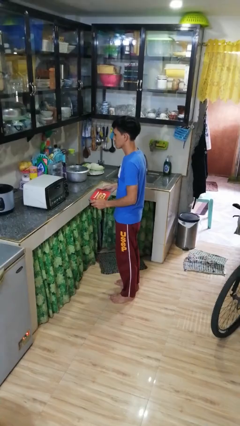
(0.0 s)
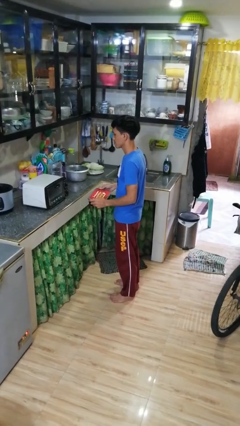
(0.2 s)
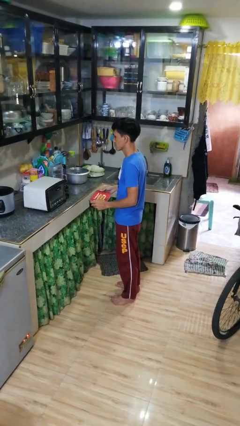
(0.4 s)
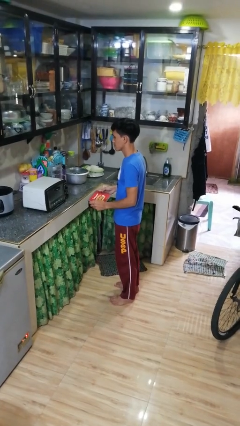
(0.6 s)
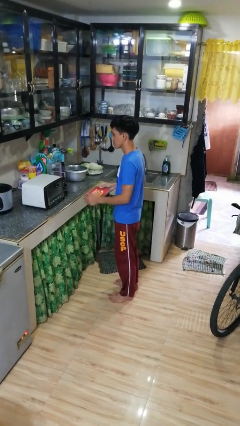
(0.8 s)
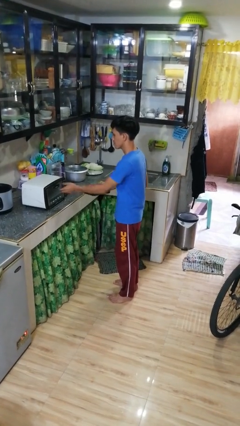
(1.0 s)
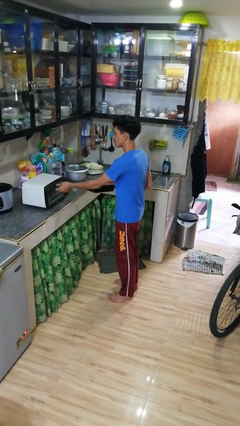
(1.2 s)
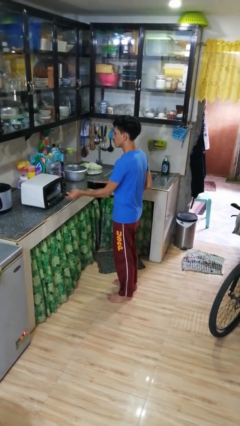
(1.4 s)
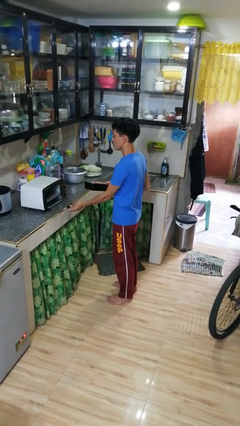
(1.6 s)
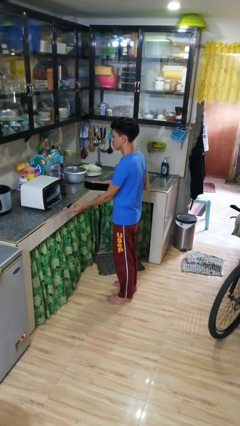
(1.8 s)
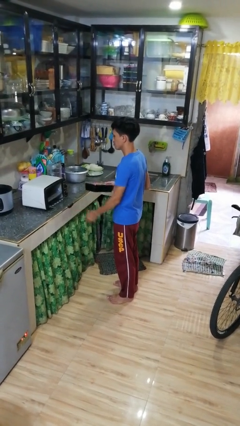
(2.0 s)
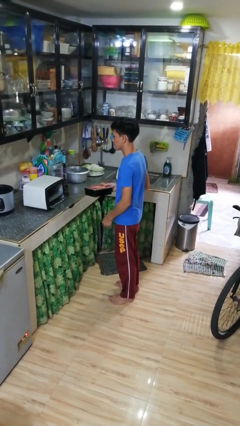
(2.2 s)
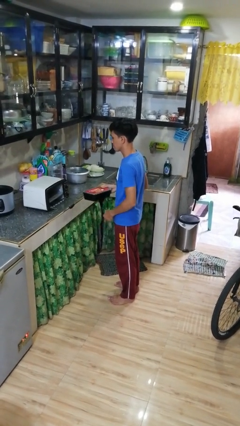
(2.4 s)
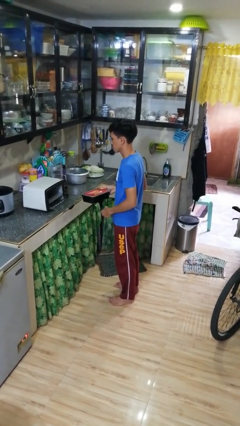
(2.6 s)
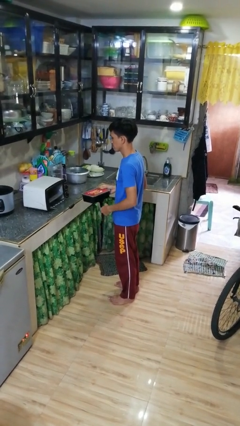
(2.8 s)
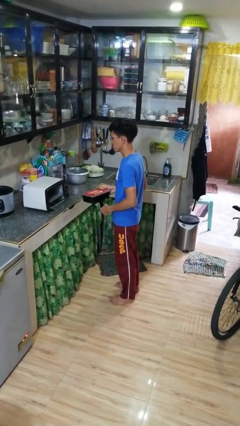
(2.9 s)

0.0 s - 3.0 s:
person opens microwave

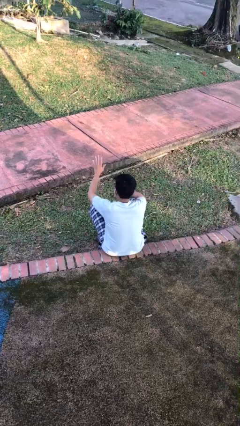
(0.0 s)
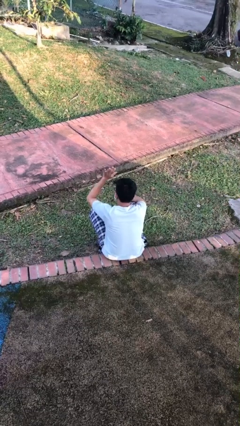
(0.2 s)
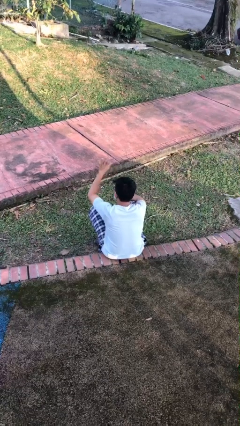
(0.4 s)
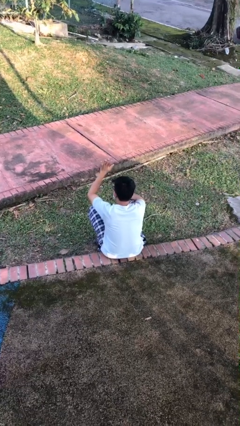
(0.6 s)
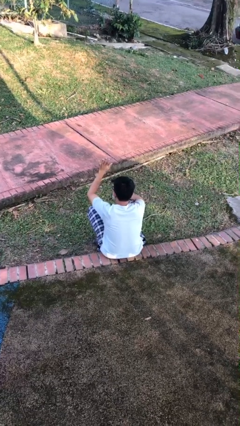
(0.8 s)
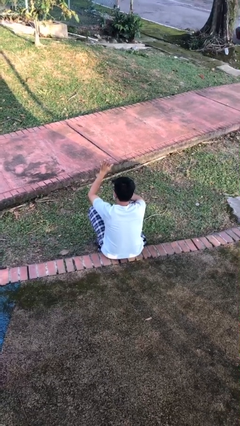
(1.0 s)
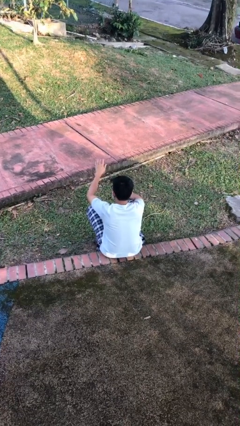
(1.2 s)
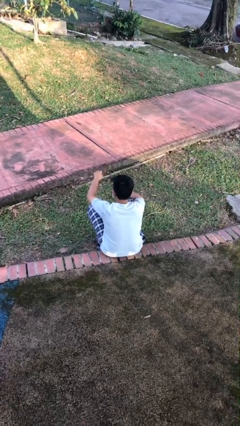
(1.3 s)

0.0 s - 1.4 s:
person gestures stop

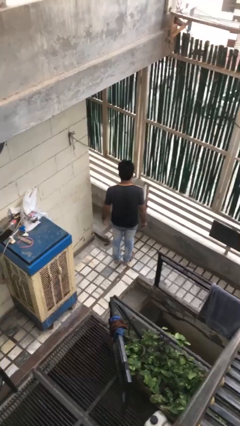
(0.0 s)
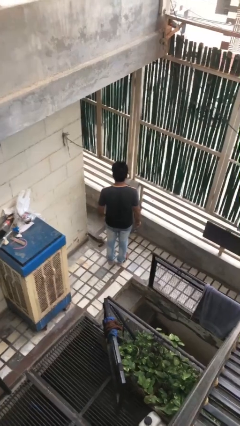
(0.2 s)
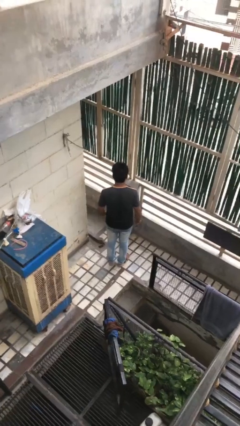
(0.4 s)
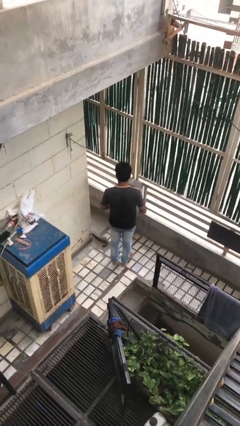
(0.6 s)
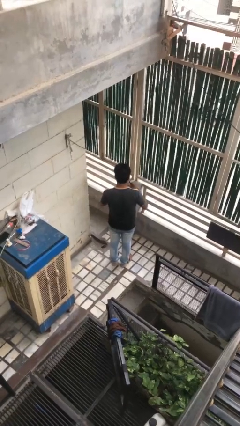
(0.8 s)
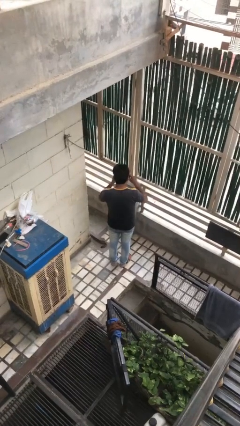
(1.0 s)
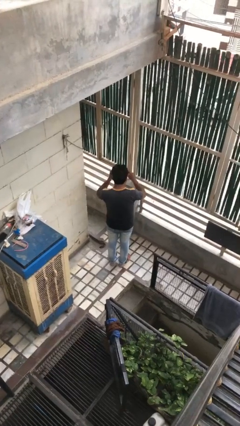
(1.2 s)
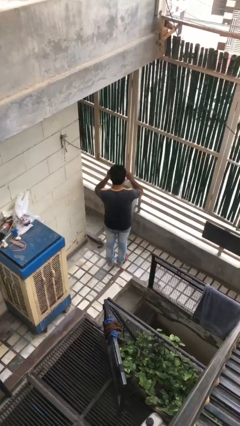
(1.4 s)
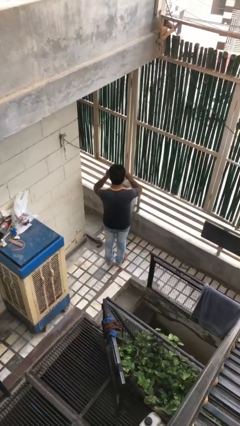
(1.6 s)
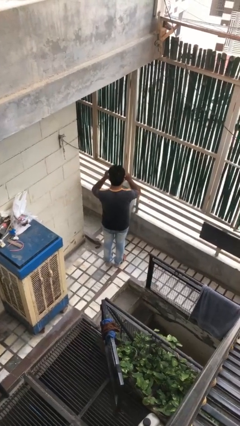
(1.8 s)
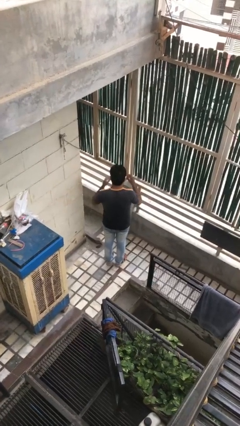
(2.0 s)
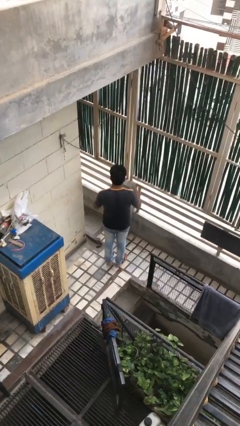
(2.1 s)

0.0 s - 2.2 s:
person puts on glasses

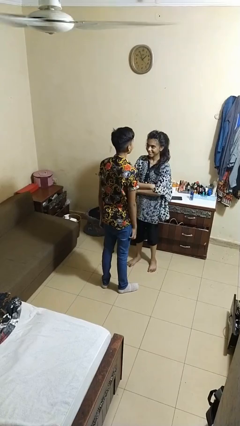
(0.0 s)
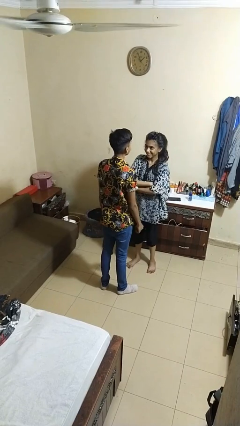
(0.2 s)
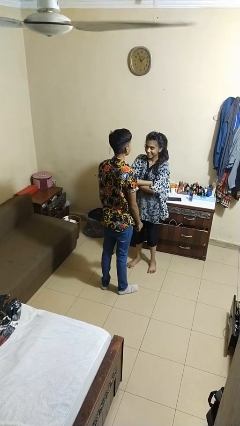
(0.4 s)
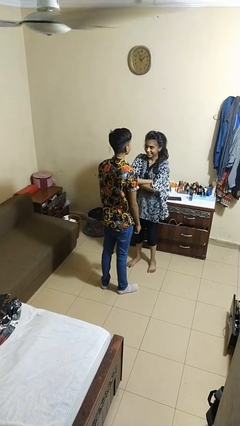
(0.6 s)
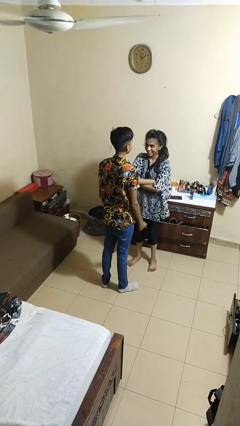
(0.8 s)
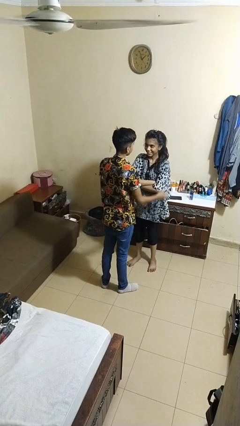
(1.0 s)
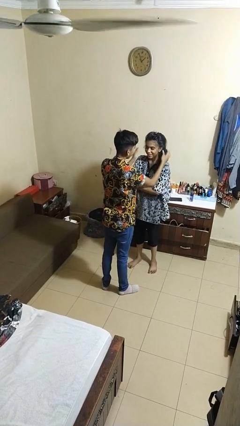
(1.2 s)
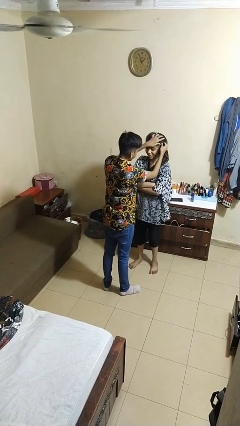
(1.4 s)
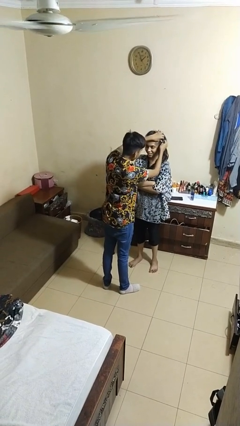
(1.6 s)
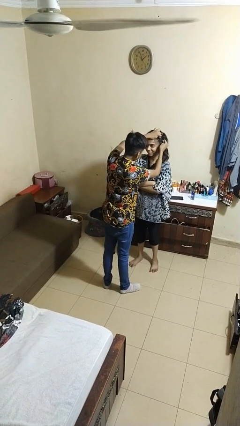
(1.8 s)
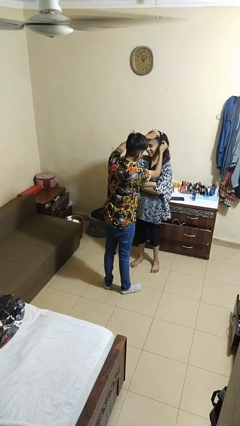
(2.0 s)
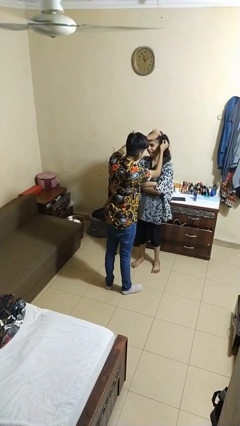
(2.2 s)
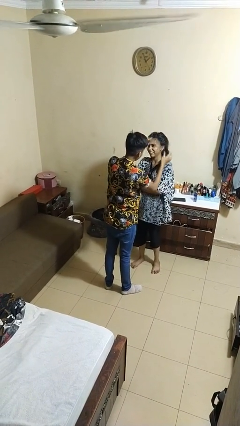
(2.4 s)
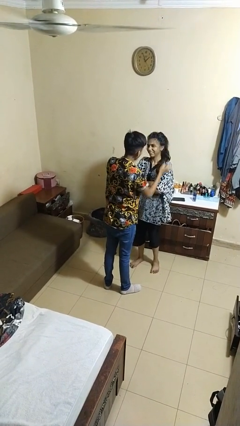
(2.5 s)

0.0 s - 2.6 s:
person grabs person by hair

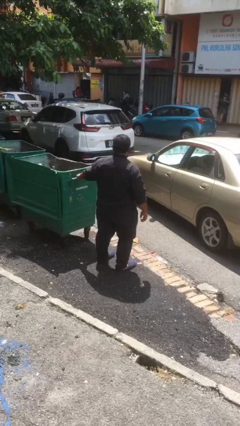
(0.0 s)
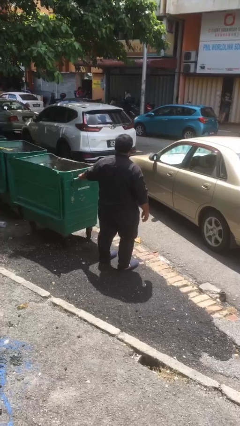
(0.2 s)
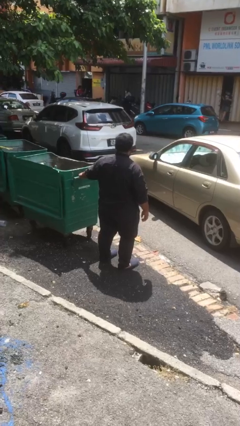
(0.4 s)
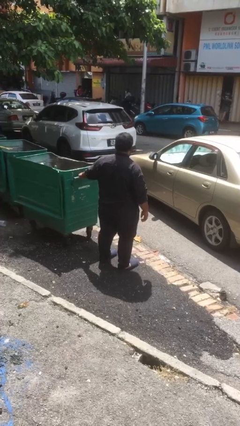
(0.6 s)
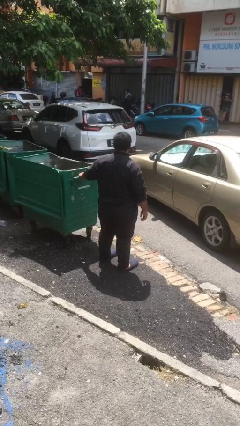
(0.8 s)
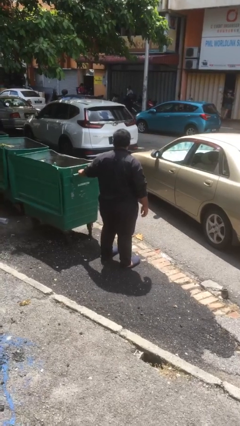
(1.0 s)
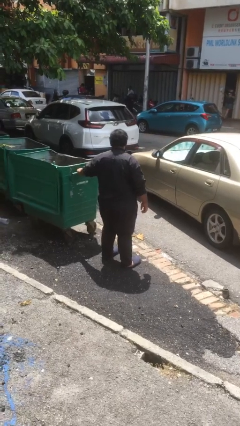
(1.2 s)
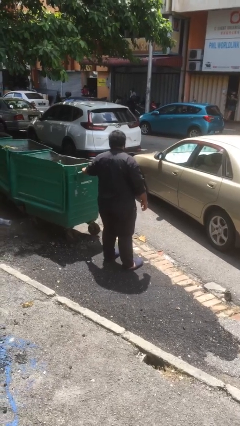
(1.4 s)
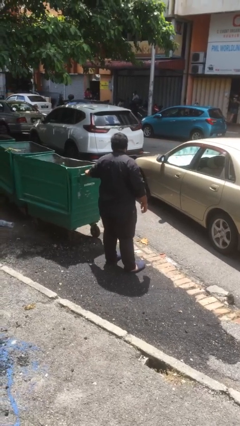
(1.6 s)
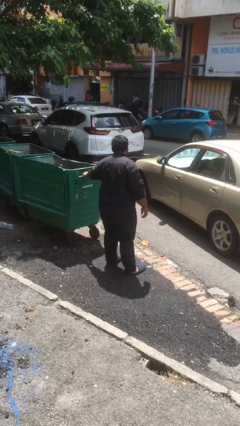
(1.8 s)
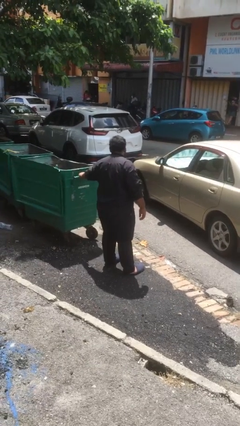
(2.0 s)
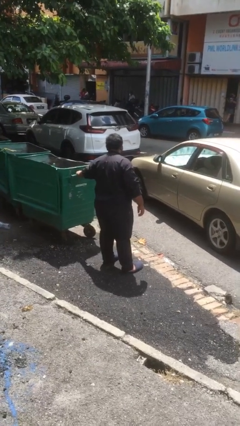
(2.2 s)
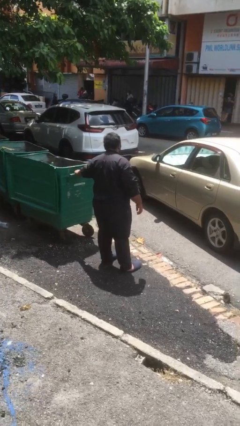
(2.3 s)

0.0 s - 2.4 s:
person pushes wheeled trashcan

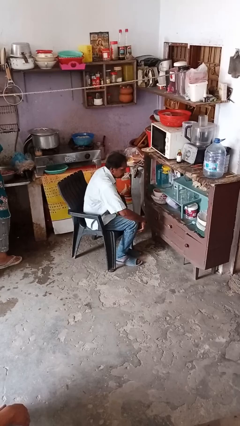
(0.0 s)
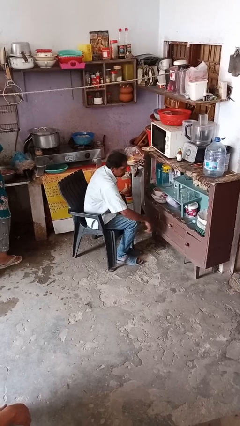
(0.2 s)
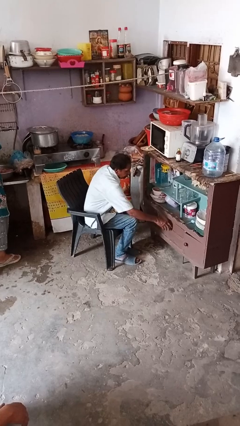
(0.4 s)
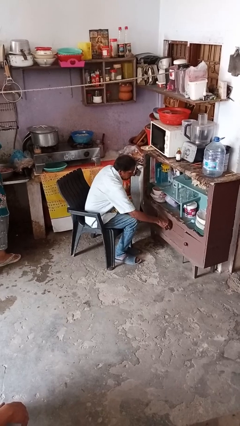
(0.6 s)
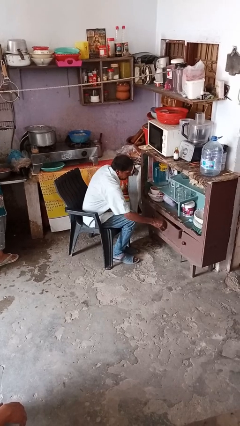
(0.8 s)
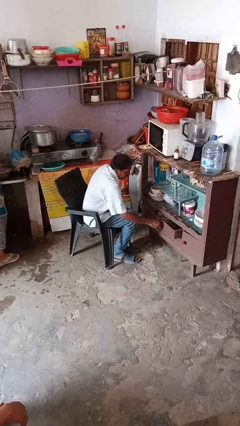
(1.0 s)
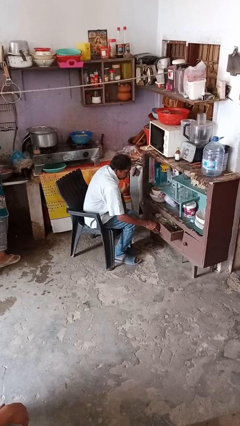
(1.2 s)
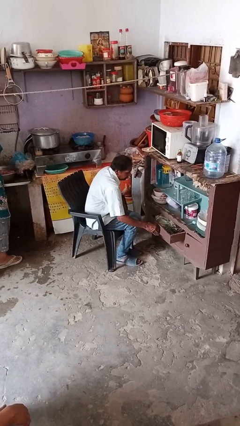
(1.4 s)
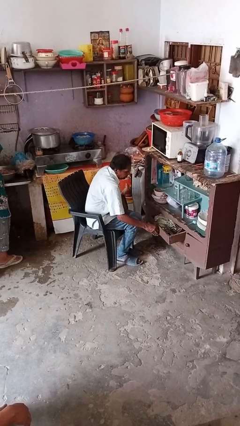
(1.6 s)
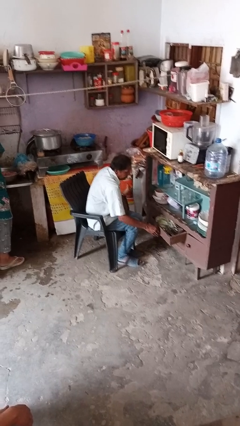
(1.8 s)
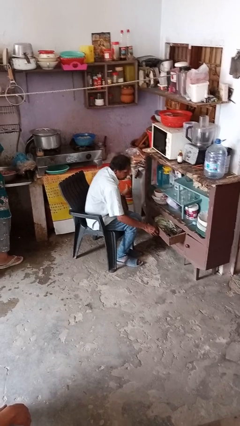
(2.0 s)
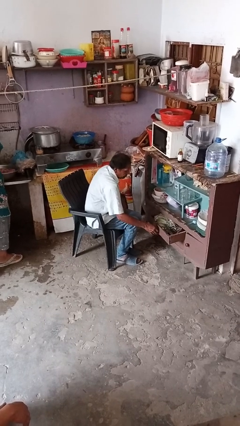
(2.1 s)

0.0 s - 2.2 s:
person opens dresser drawer

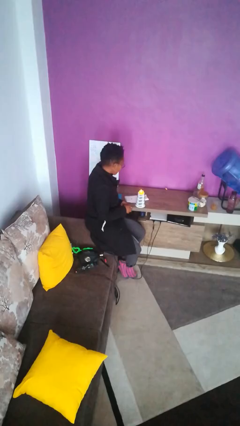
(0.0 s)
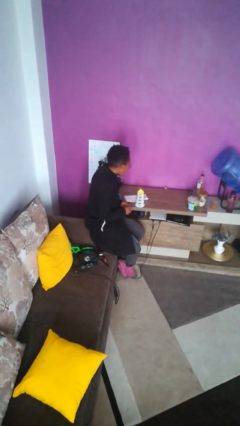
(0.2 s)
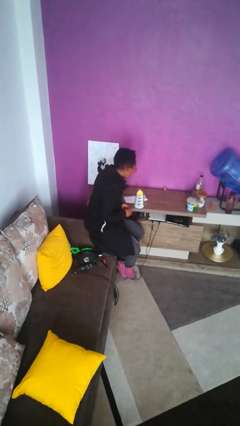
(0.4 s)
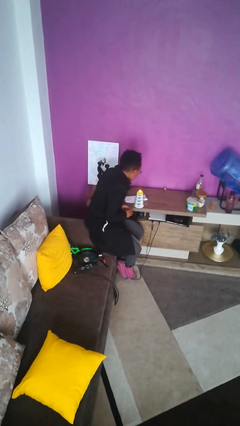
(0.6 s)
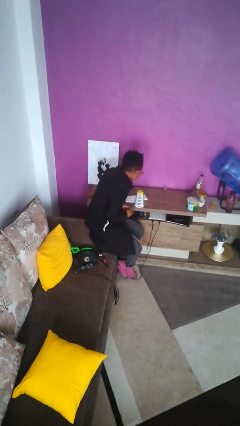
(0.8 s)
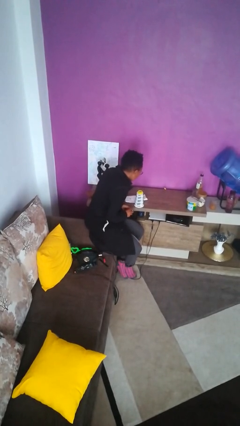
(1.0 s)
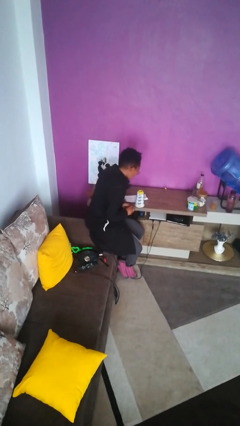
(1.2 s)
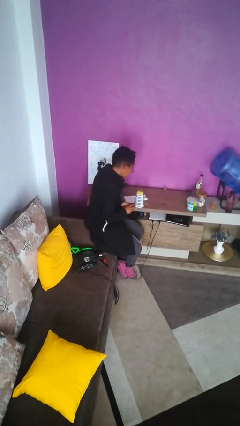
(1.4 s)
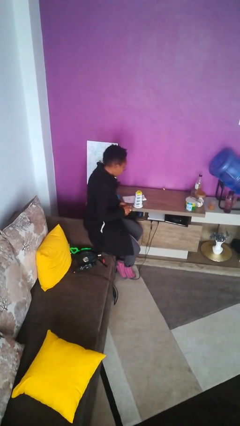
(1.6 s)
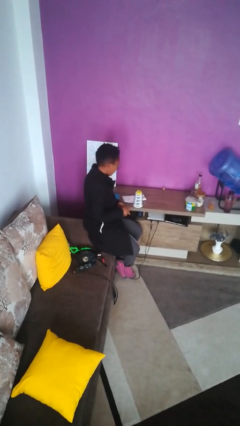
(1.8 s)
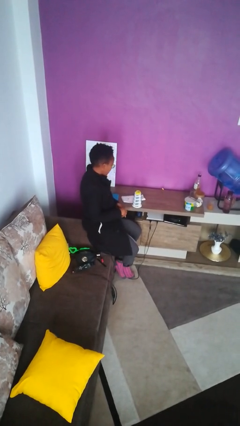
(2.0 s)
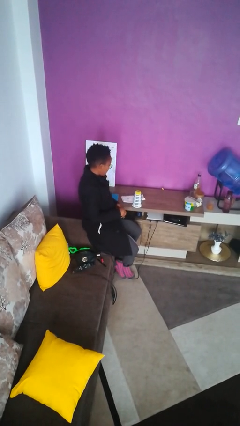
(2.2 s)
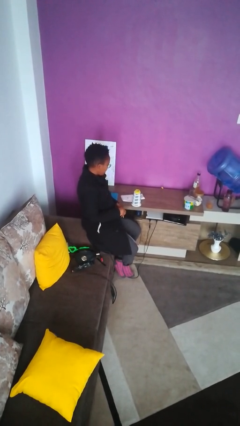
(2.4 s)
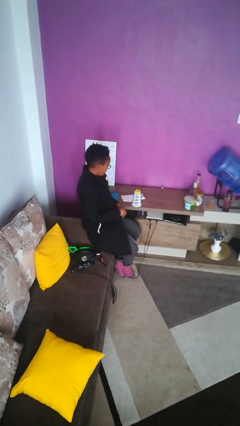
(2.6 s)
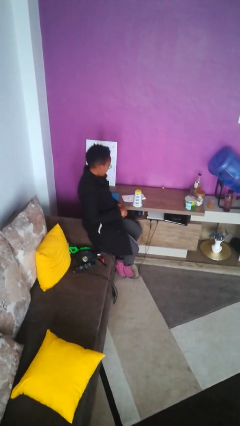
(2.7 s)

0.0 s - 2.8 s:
person extinguishes candle

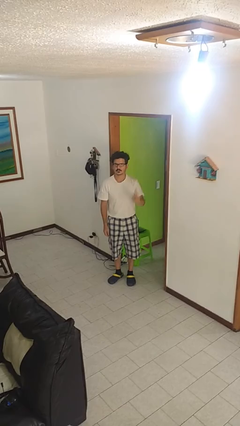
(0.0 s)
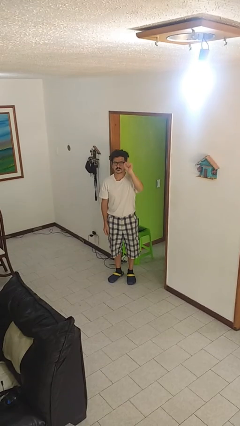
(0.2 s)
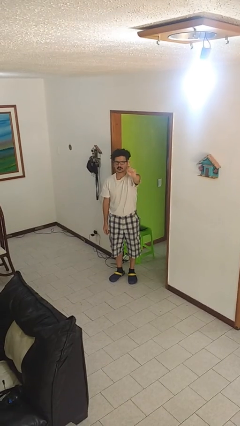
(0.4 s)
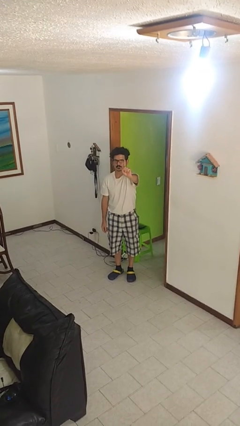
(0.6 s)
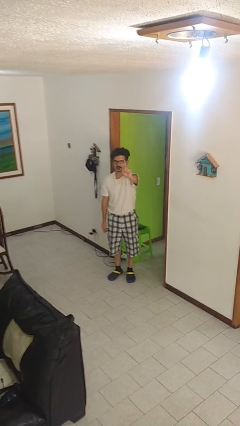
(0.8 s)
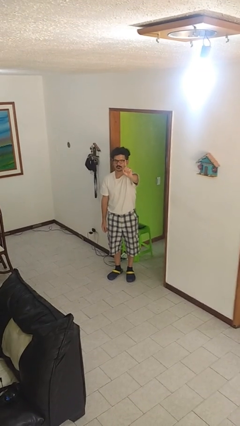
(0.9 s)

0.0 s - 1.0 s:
person gestures number one
